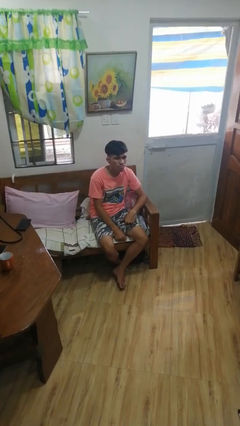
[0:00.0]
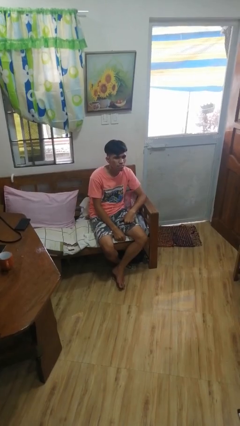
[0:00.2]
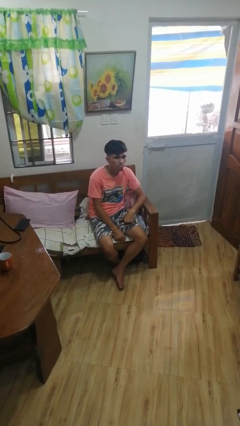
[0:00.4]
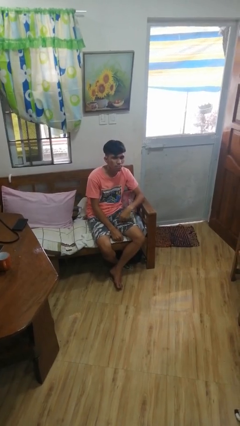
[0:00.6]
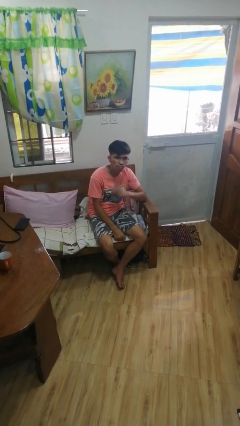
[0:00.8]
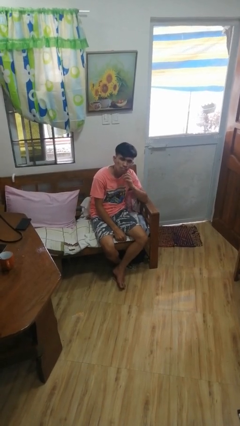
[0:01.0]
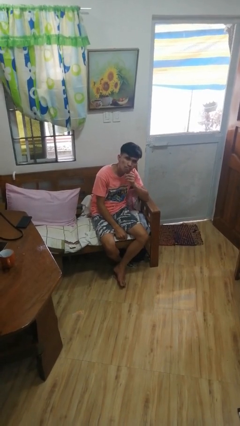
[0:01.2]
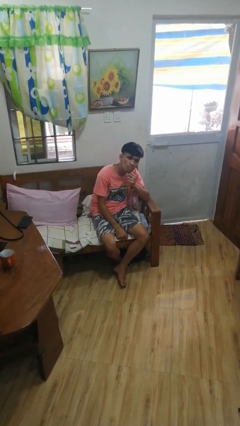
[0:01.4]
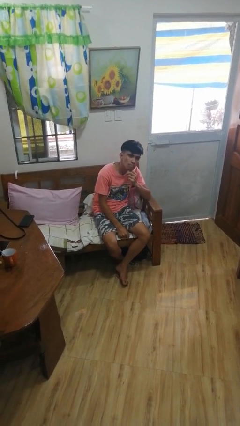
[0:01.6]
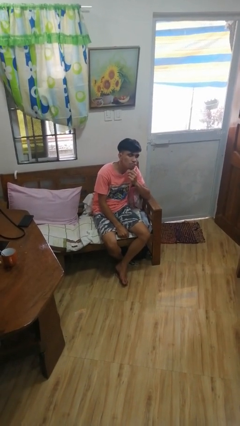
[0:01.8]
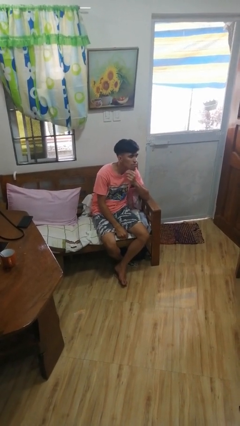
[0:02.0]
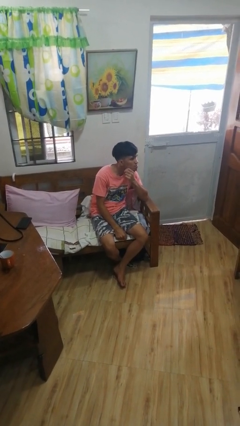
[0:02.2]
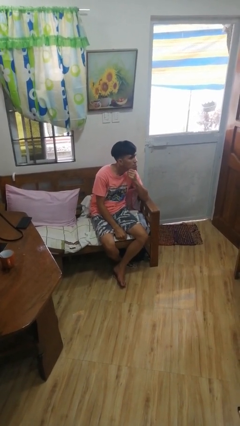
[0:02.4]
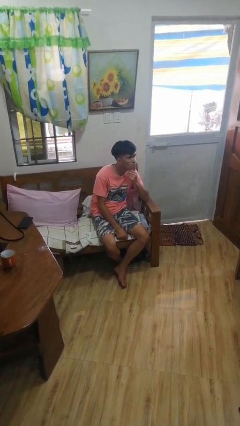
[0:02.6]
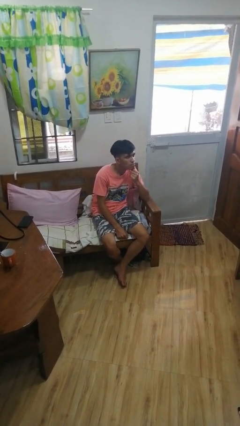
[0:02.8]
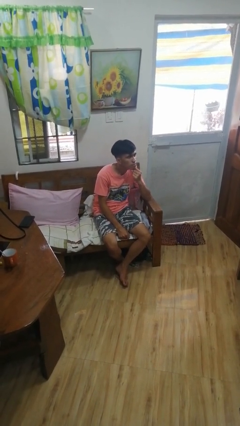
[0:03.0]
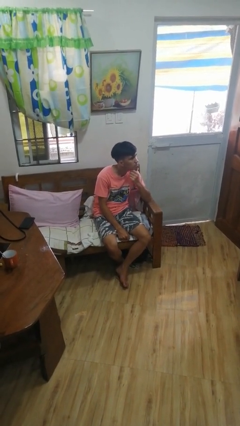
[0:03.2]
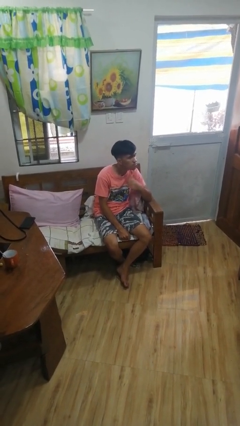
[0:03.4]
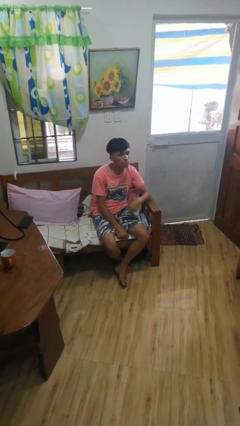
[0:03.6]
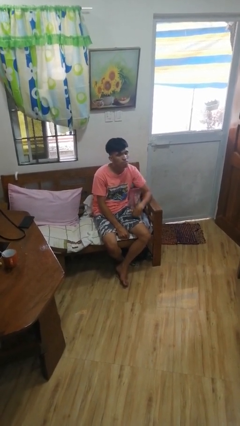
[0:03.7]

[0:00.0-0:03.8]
person strokes chin

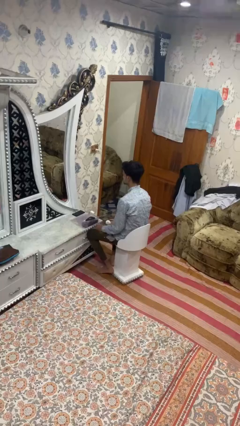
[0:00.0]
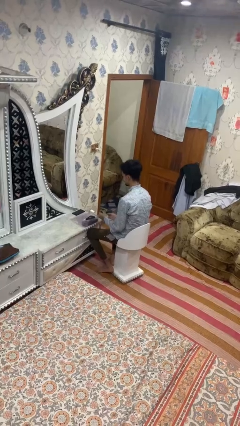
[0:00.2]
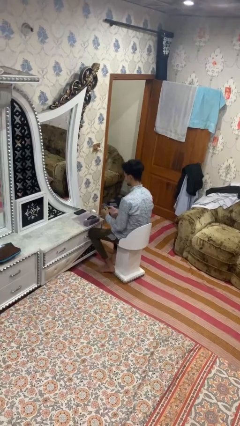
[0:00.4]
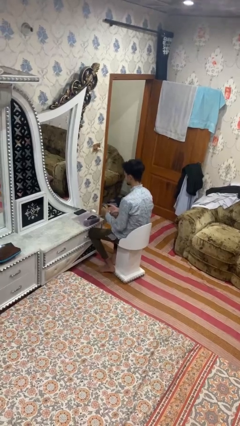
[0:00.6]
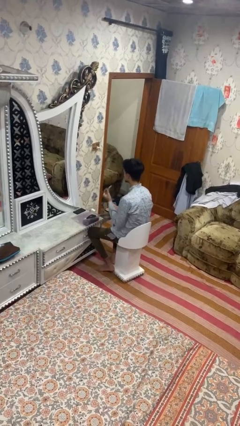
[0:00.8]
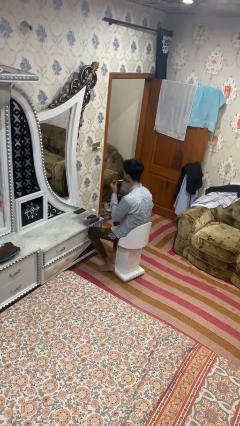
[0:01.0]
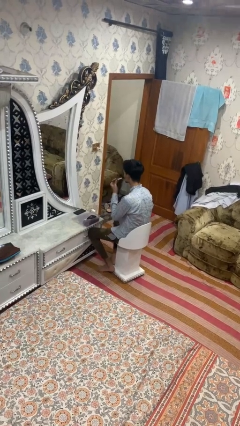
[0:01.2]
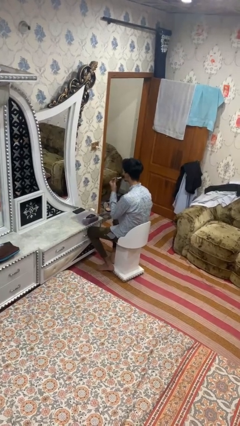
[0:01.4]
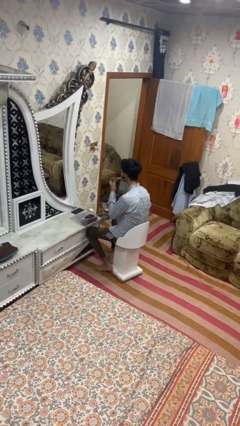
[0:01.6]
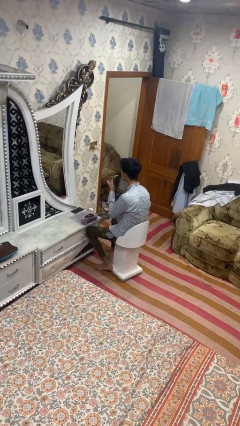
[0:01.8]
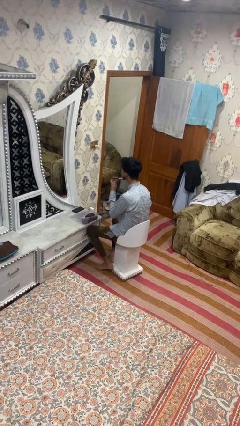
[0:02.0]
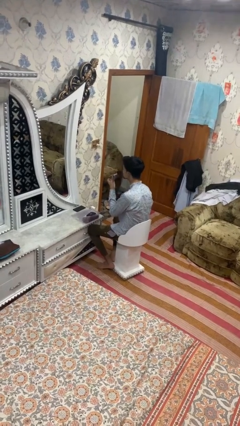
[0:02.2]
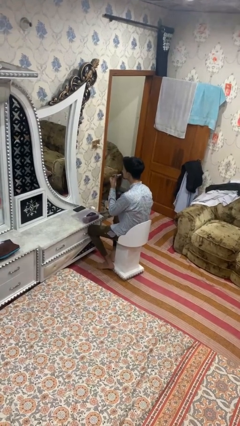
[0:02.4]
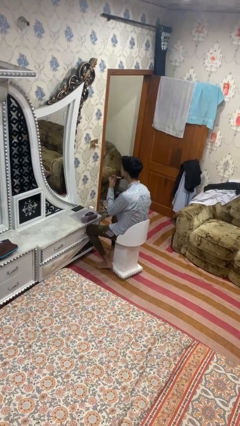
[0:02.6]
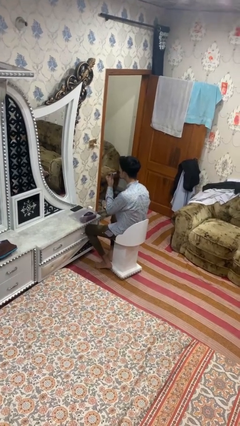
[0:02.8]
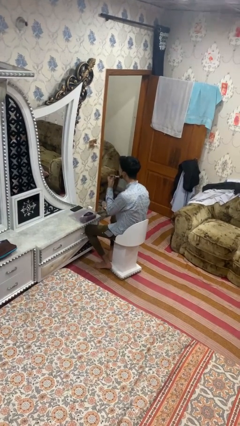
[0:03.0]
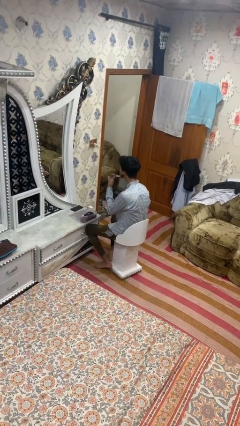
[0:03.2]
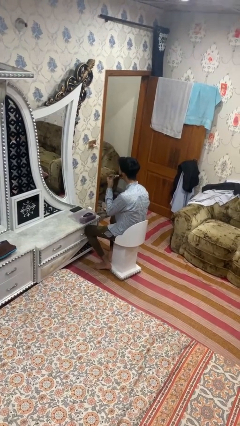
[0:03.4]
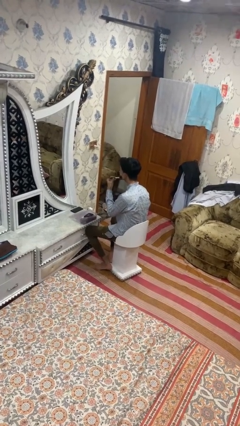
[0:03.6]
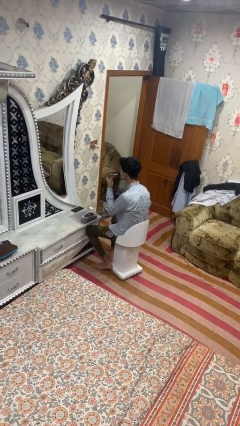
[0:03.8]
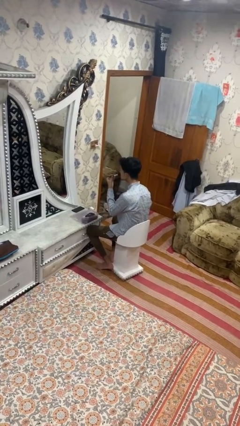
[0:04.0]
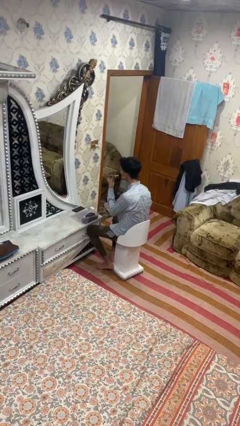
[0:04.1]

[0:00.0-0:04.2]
person applies foundation makeup

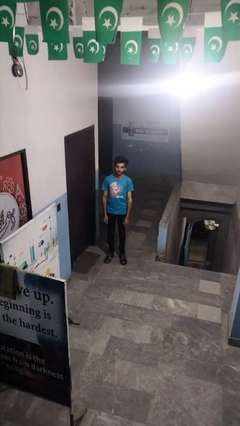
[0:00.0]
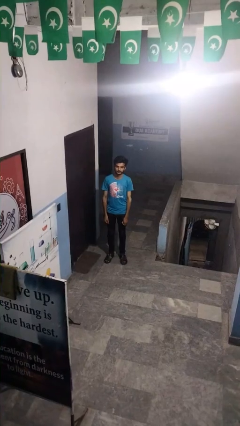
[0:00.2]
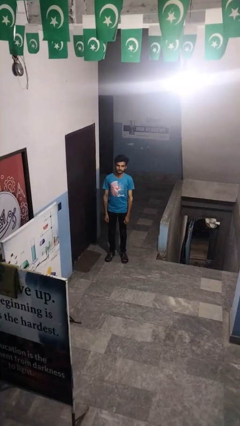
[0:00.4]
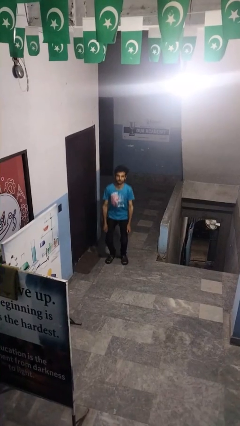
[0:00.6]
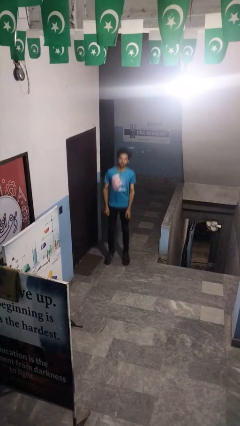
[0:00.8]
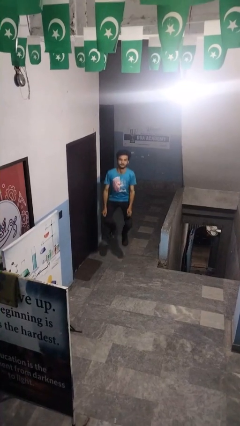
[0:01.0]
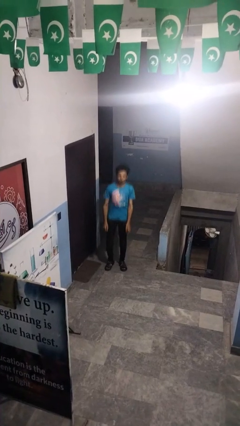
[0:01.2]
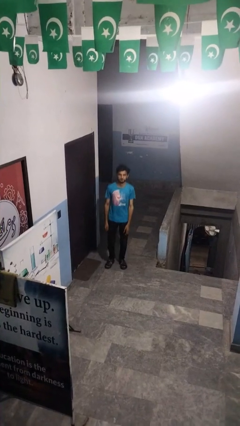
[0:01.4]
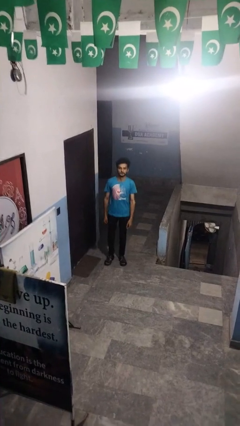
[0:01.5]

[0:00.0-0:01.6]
person jumps

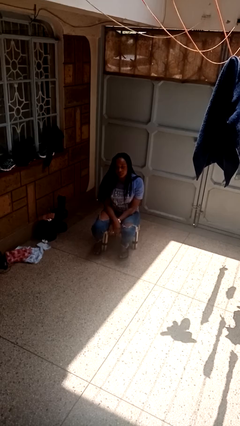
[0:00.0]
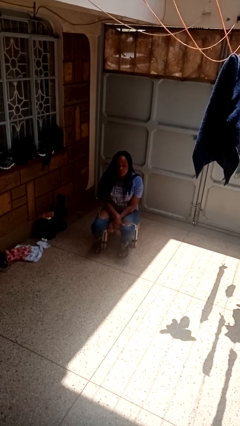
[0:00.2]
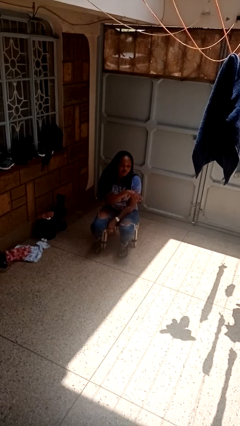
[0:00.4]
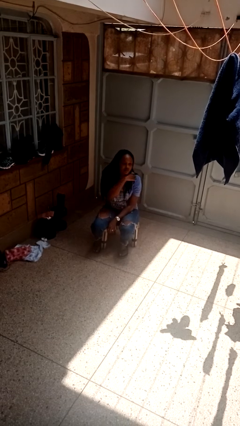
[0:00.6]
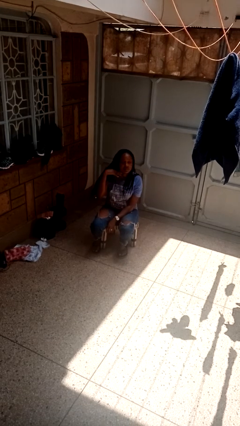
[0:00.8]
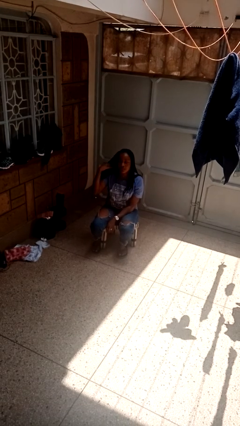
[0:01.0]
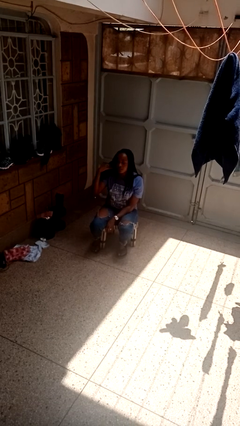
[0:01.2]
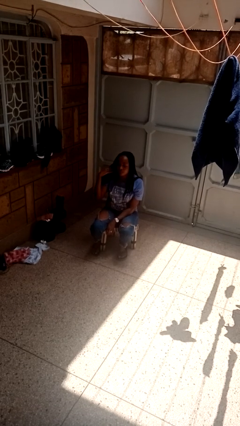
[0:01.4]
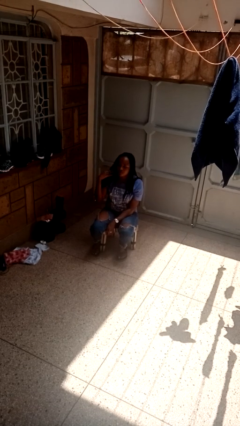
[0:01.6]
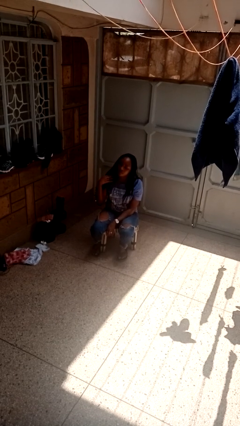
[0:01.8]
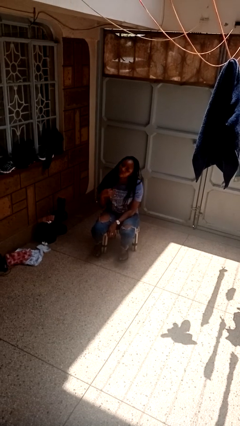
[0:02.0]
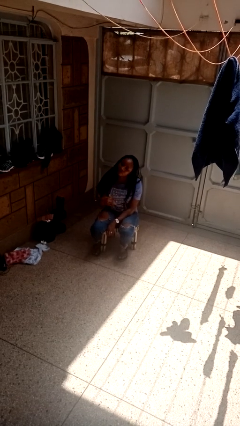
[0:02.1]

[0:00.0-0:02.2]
person gestures cut

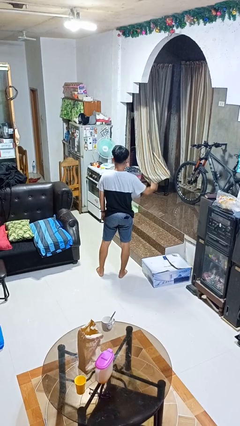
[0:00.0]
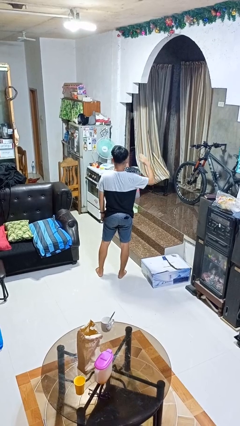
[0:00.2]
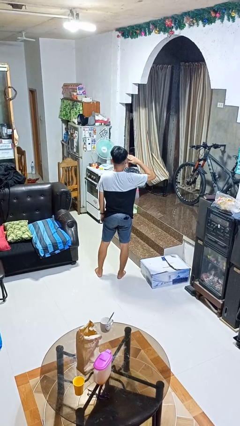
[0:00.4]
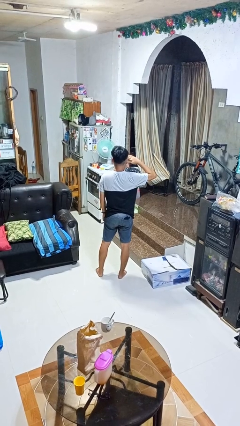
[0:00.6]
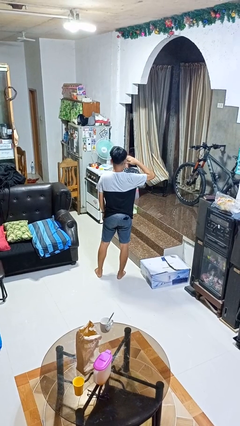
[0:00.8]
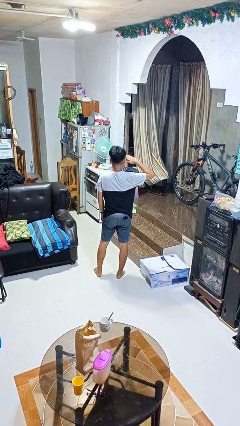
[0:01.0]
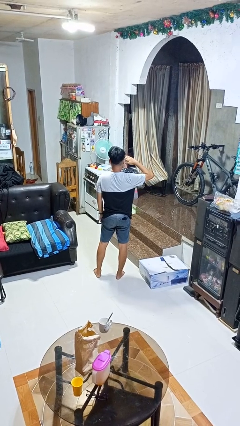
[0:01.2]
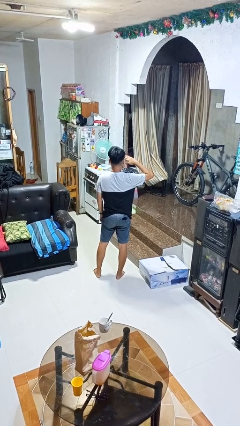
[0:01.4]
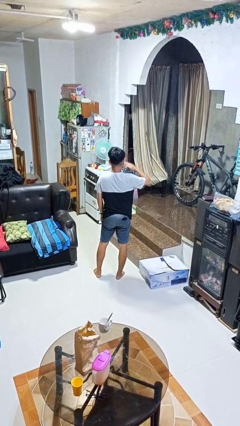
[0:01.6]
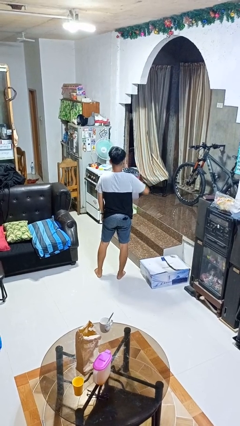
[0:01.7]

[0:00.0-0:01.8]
person salutes

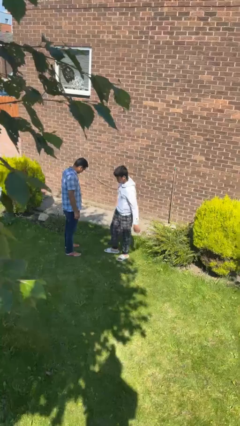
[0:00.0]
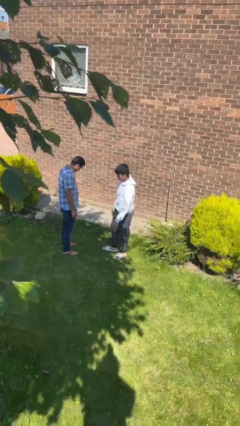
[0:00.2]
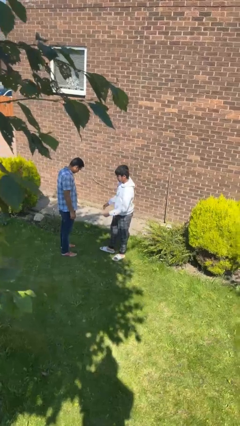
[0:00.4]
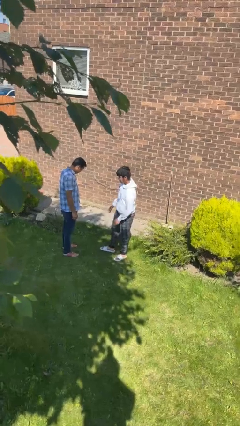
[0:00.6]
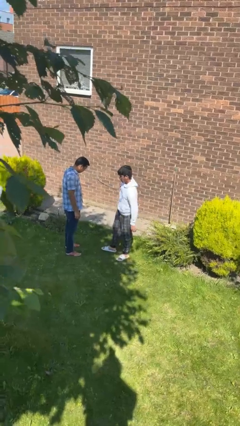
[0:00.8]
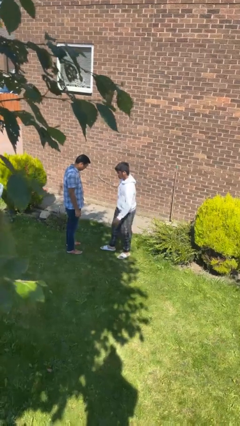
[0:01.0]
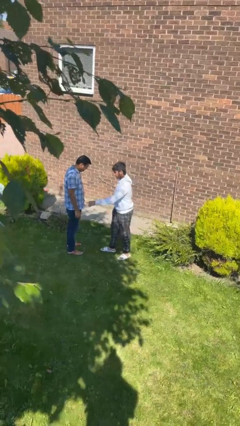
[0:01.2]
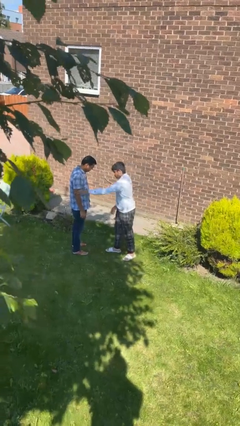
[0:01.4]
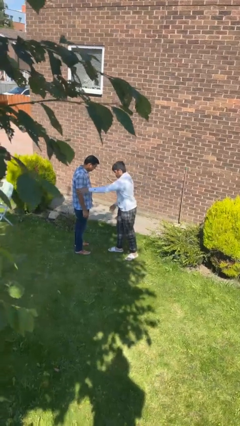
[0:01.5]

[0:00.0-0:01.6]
person grabs person by bicep

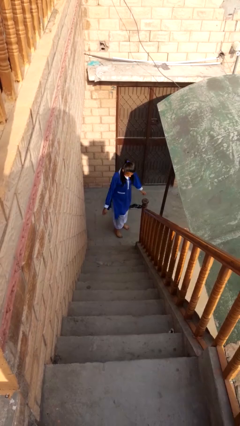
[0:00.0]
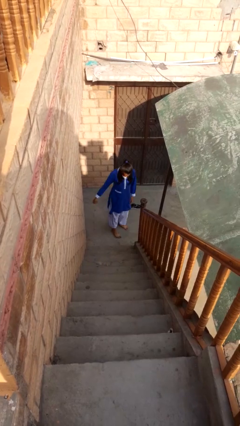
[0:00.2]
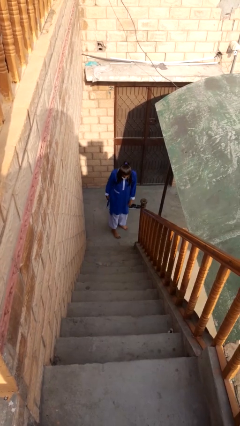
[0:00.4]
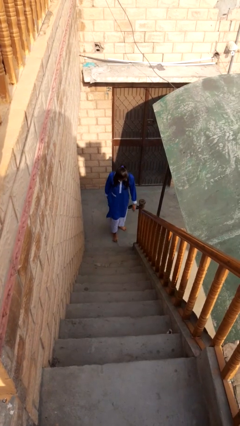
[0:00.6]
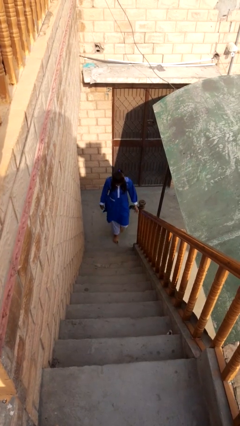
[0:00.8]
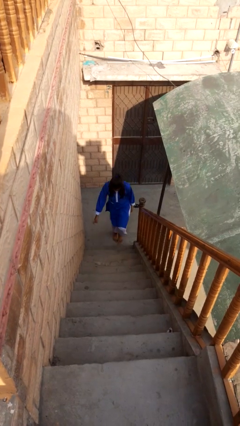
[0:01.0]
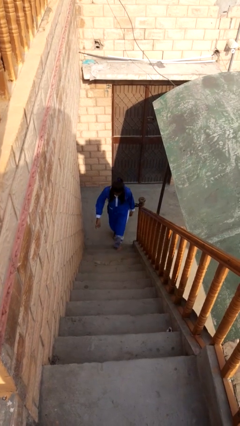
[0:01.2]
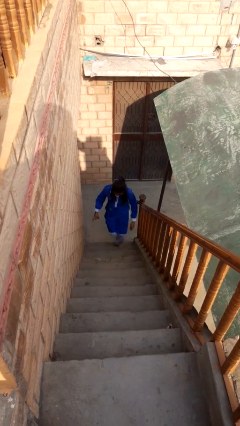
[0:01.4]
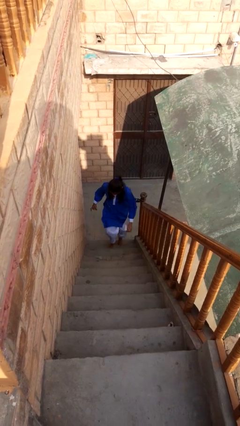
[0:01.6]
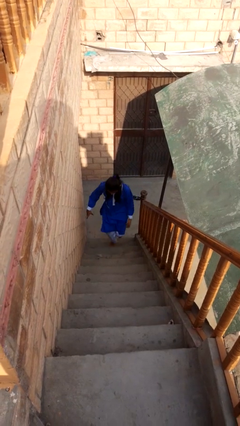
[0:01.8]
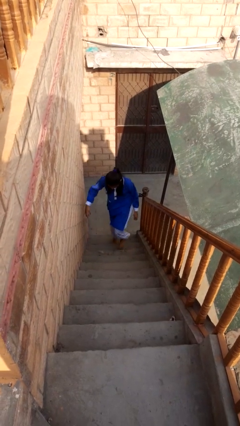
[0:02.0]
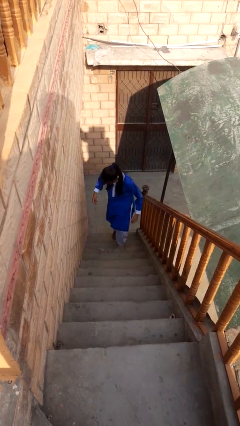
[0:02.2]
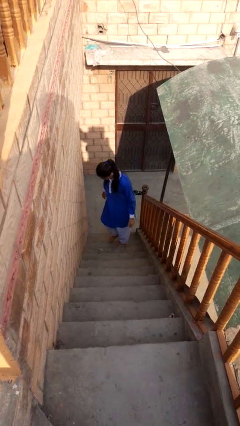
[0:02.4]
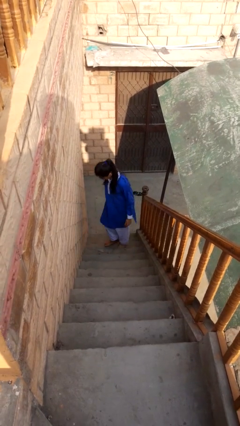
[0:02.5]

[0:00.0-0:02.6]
person climbs up stairs
